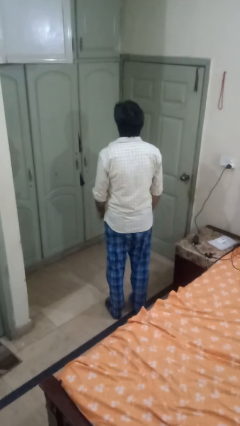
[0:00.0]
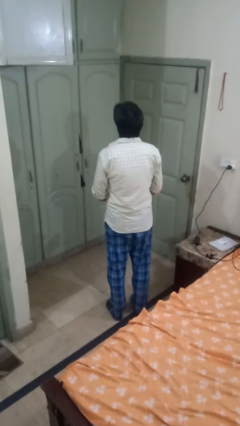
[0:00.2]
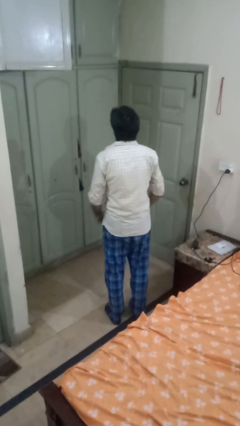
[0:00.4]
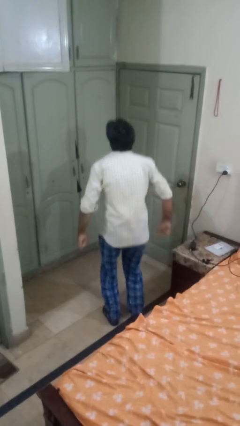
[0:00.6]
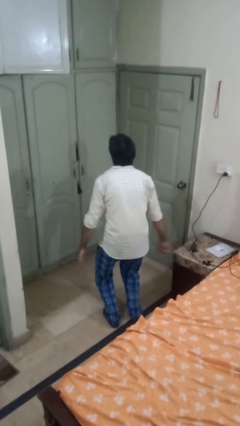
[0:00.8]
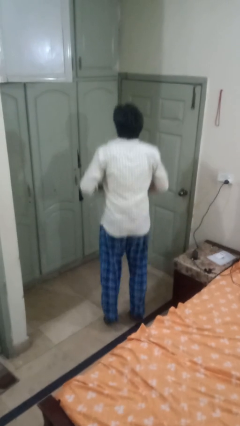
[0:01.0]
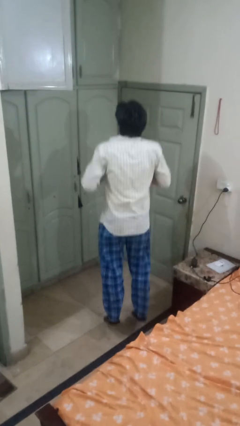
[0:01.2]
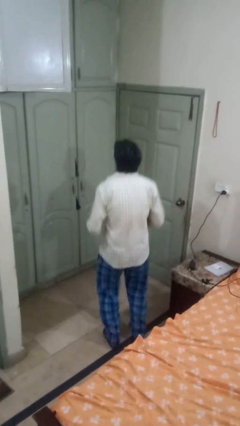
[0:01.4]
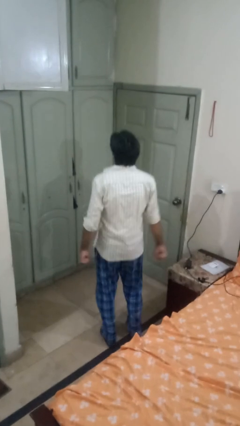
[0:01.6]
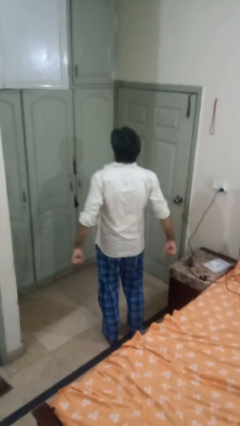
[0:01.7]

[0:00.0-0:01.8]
person jumps

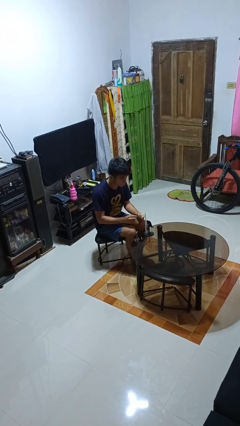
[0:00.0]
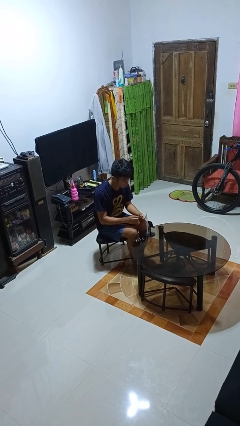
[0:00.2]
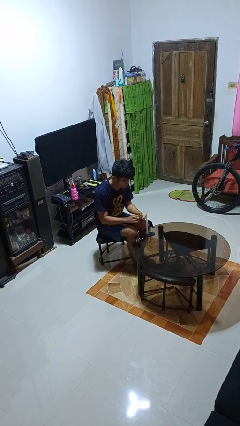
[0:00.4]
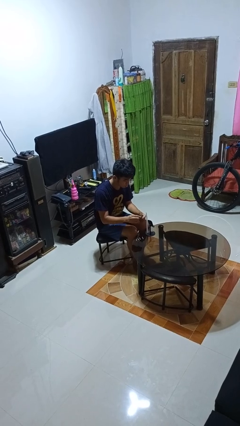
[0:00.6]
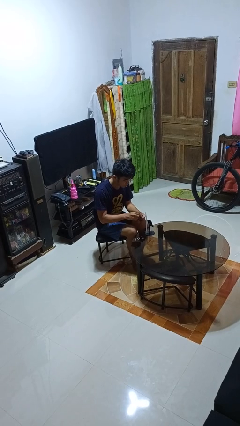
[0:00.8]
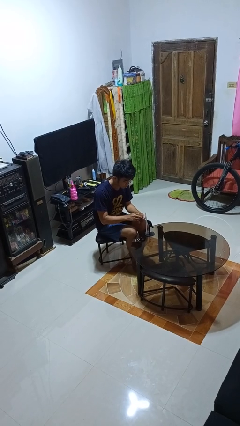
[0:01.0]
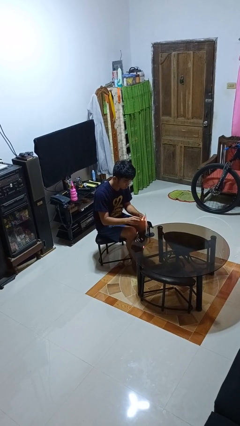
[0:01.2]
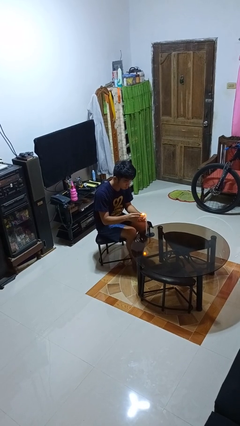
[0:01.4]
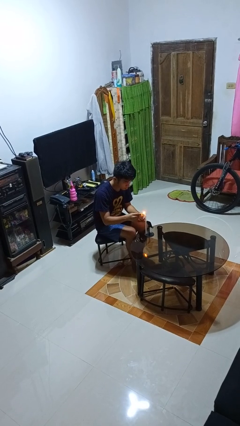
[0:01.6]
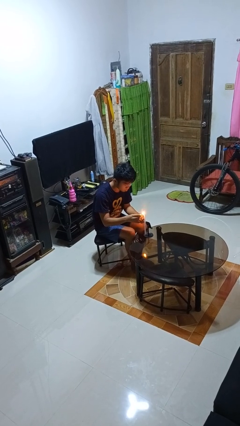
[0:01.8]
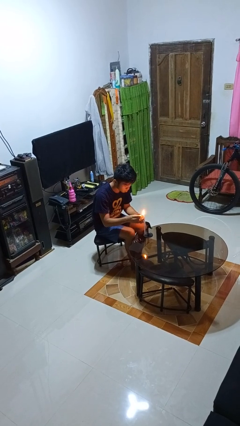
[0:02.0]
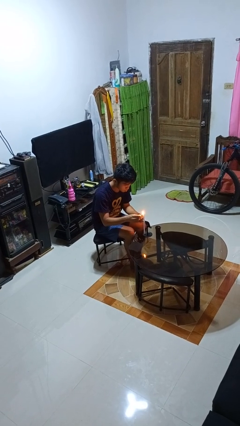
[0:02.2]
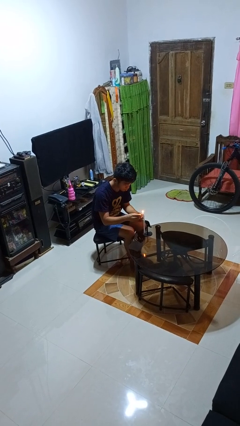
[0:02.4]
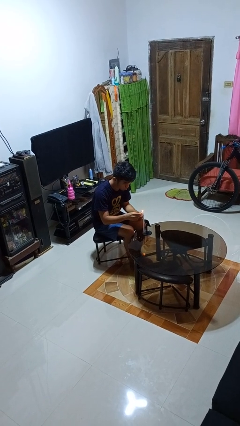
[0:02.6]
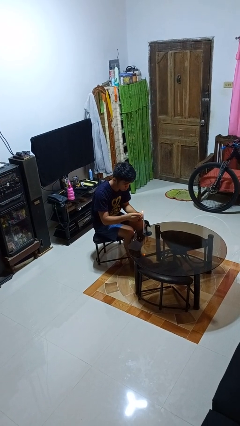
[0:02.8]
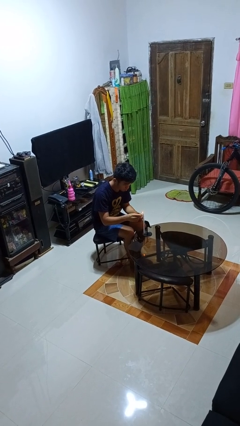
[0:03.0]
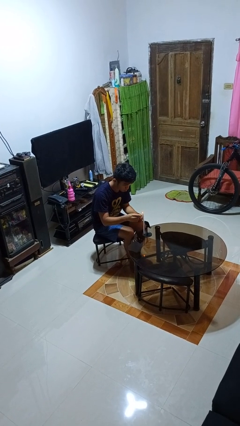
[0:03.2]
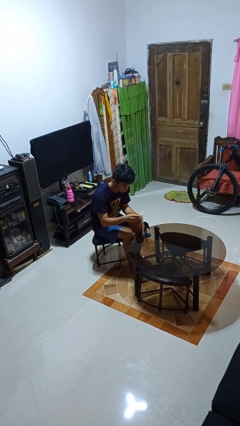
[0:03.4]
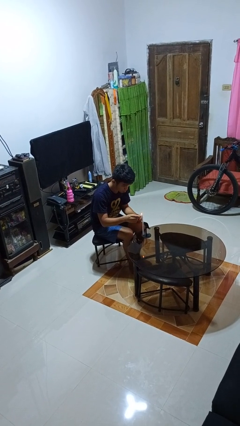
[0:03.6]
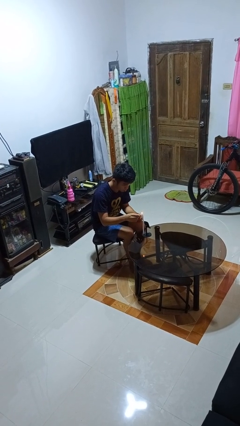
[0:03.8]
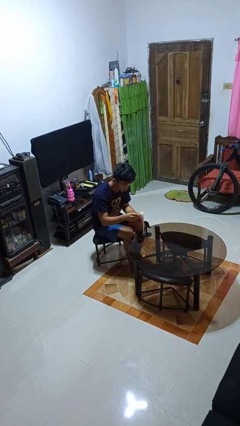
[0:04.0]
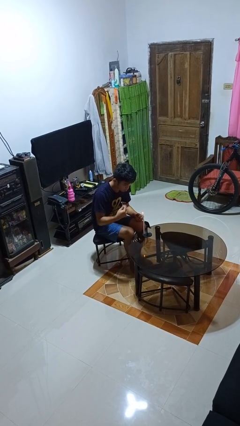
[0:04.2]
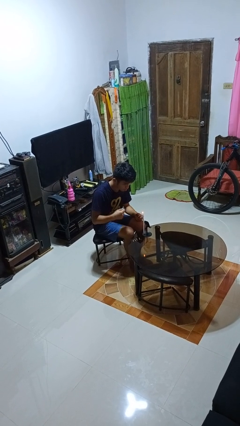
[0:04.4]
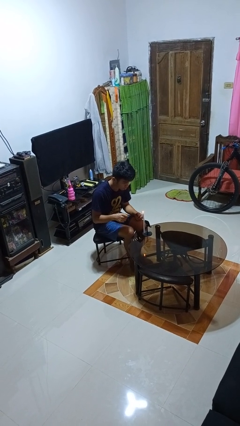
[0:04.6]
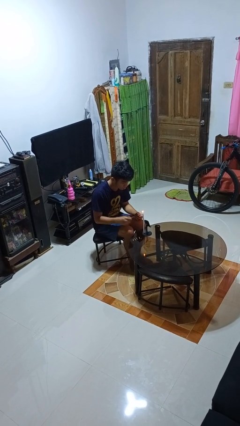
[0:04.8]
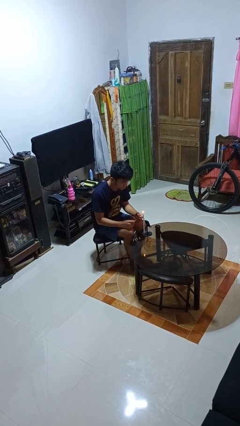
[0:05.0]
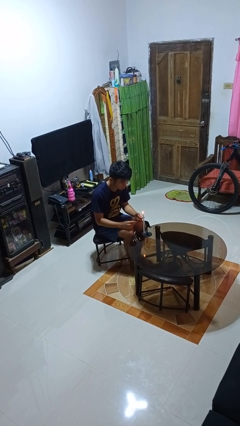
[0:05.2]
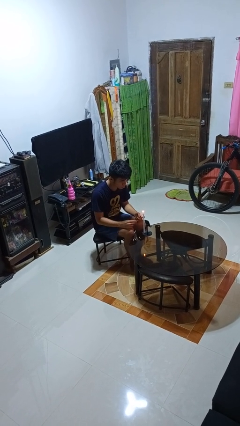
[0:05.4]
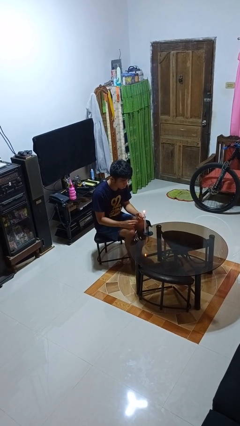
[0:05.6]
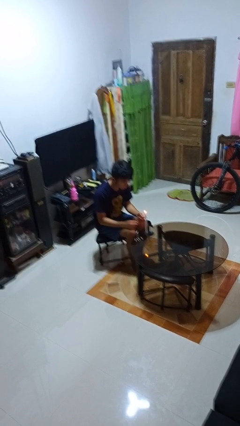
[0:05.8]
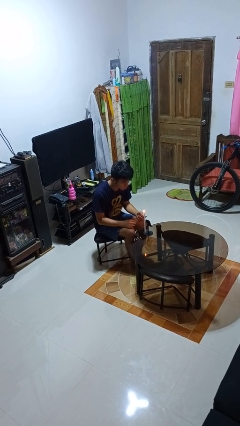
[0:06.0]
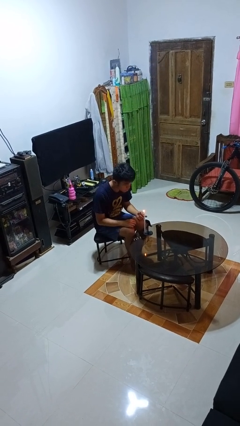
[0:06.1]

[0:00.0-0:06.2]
person lights candle

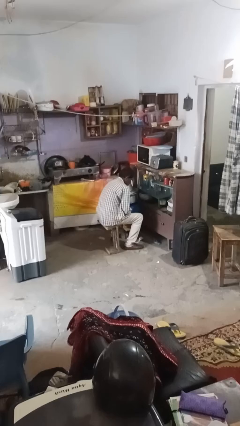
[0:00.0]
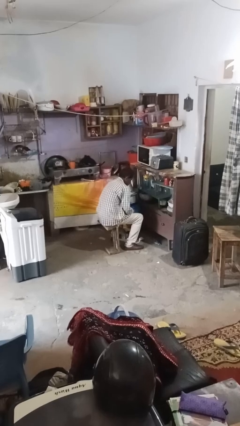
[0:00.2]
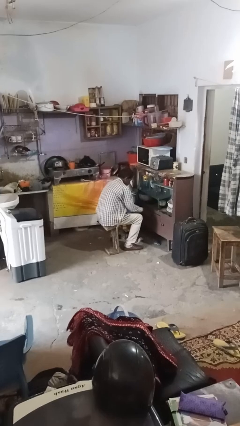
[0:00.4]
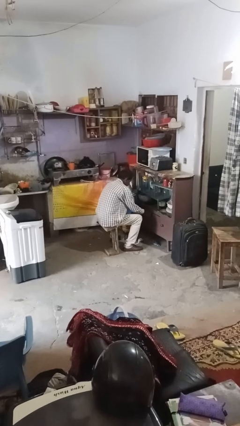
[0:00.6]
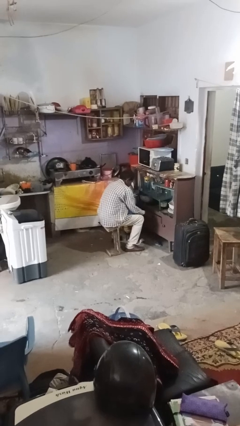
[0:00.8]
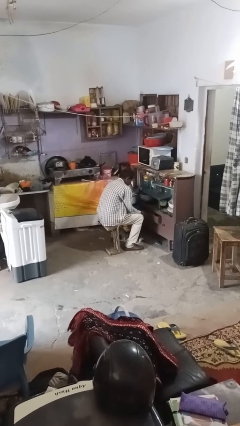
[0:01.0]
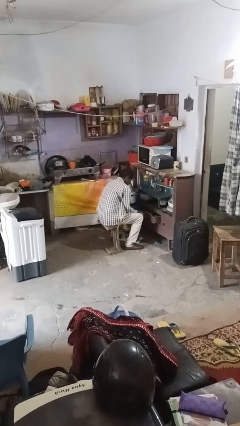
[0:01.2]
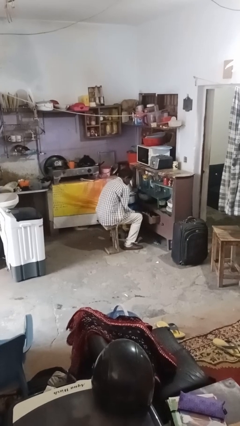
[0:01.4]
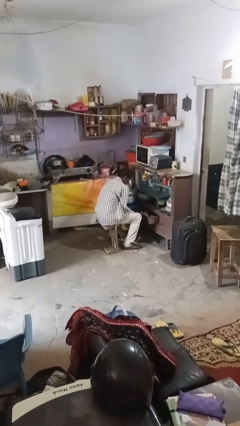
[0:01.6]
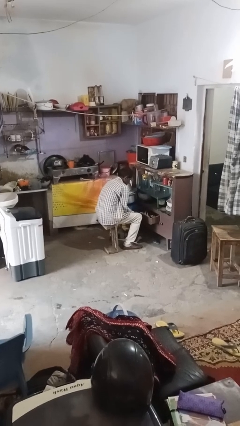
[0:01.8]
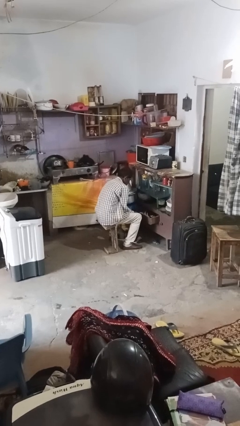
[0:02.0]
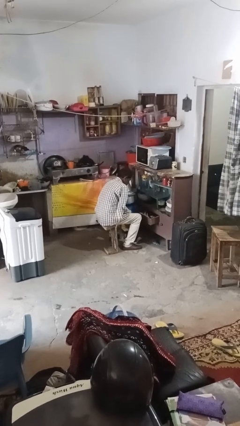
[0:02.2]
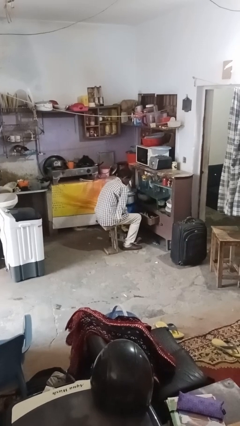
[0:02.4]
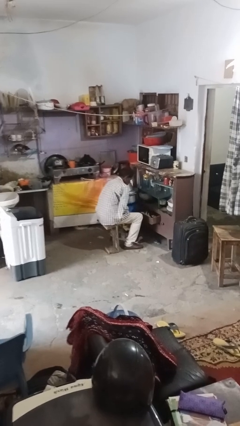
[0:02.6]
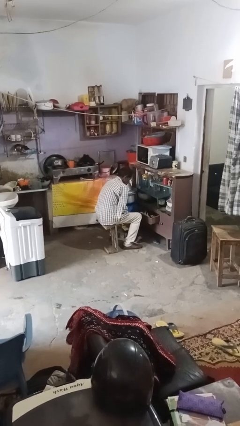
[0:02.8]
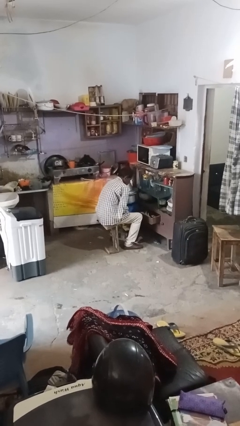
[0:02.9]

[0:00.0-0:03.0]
person opens kitchen drawer

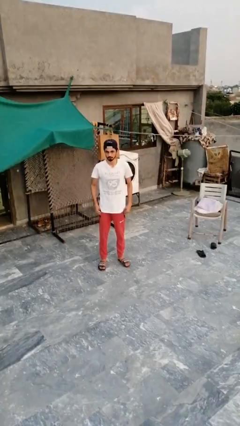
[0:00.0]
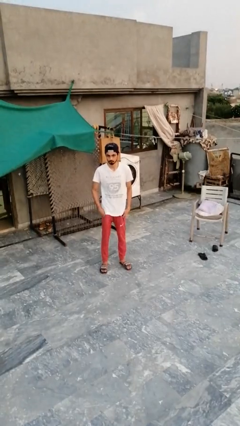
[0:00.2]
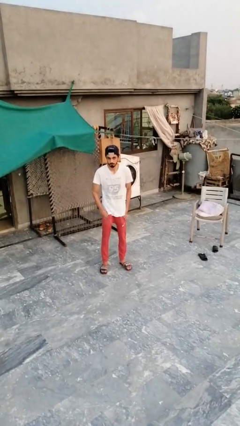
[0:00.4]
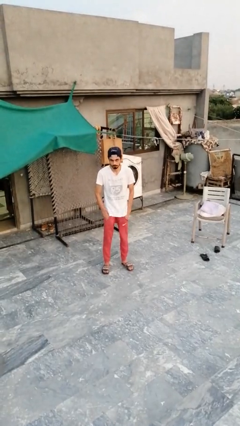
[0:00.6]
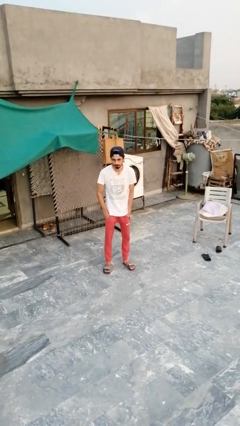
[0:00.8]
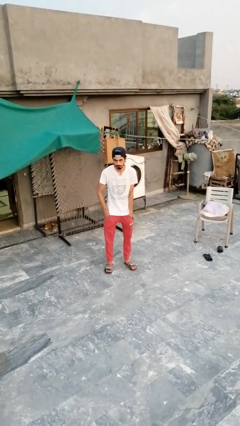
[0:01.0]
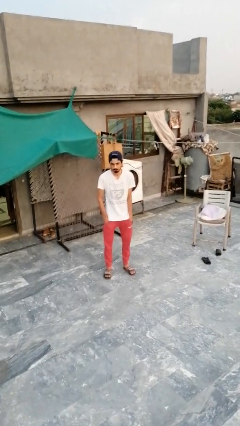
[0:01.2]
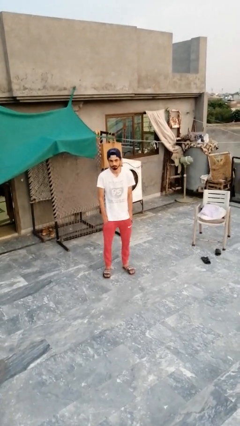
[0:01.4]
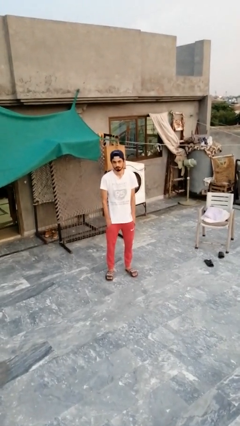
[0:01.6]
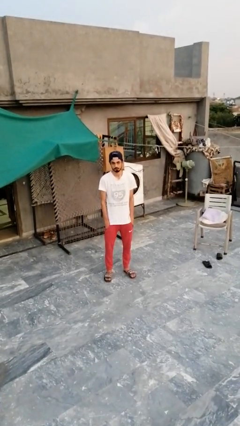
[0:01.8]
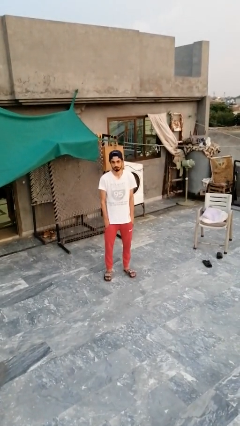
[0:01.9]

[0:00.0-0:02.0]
person puts hands in back pockets

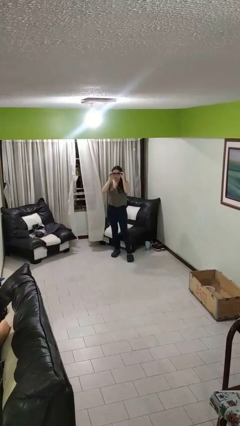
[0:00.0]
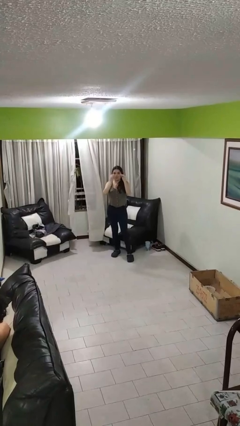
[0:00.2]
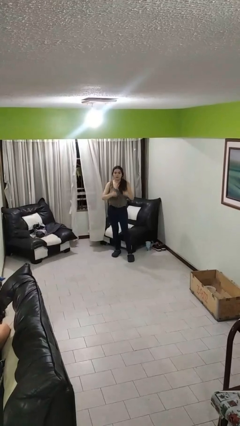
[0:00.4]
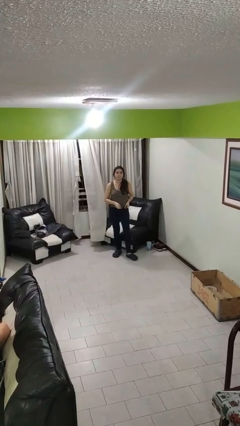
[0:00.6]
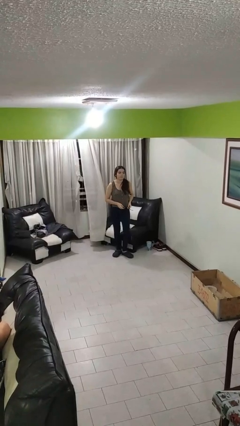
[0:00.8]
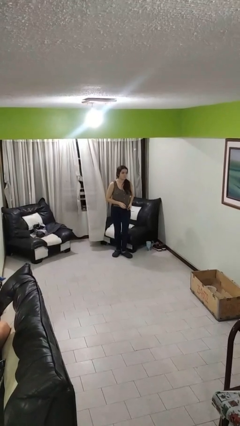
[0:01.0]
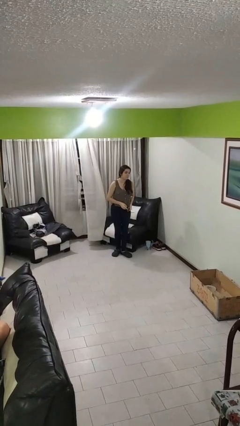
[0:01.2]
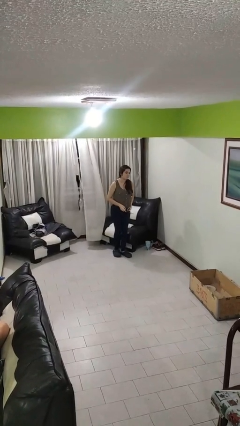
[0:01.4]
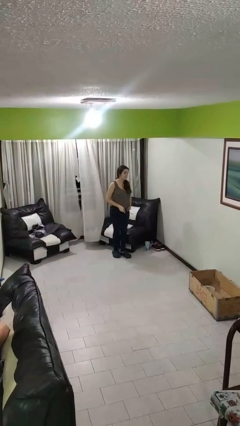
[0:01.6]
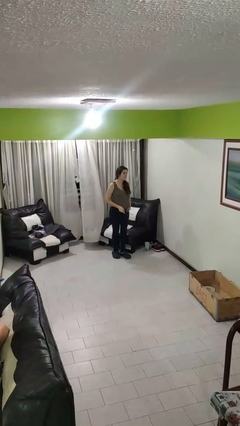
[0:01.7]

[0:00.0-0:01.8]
person takes off glasses

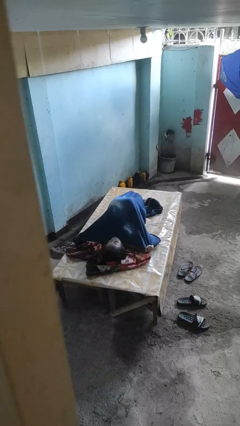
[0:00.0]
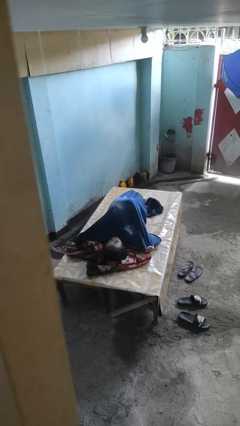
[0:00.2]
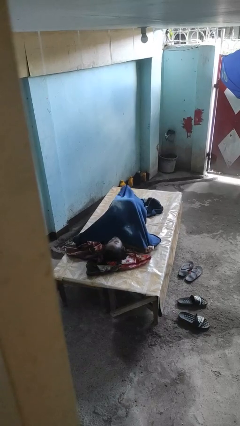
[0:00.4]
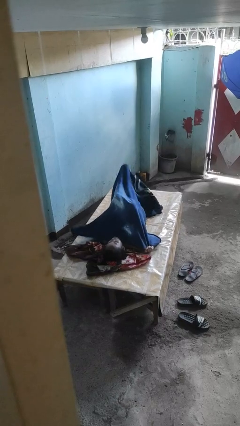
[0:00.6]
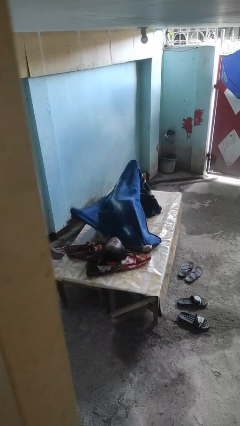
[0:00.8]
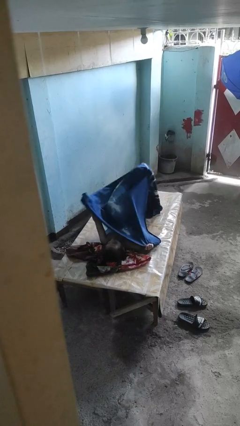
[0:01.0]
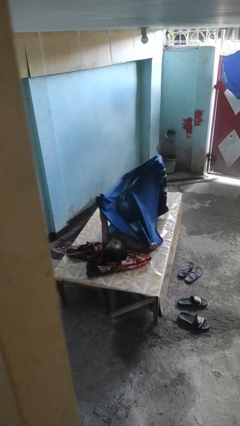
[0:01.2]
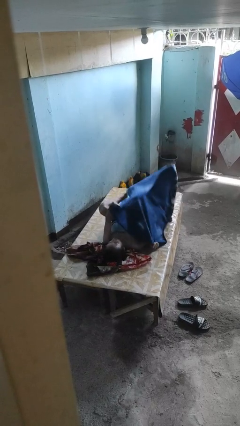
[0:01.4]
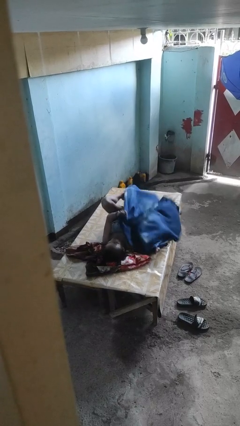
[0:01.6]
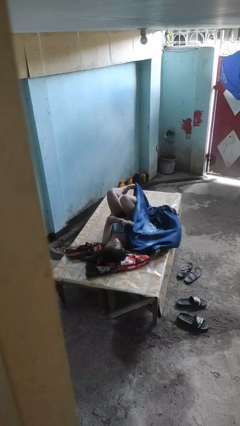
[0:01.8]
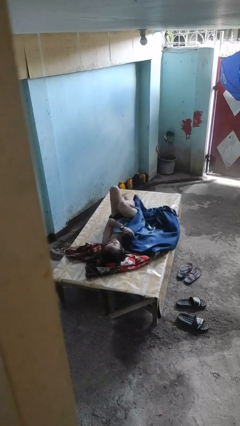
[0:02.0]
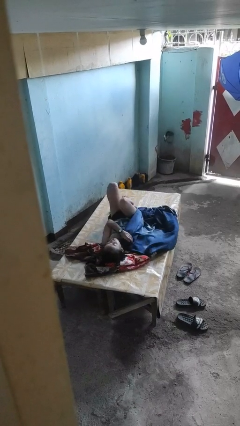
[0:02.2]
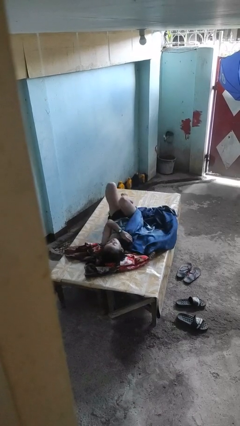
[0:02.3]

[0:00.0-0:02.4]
person uncovers with bedsheets

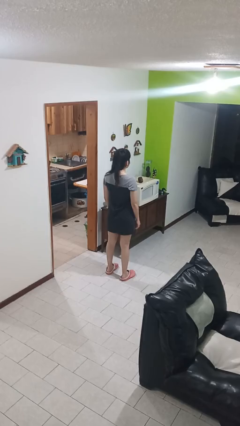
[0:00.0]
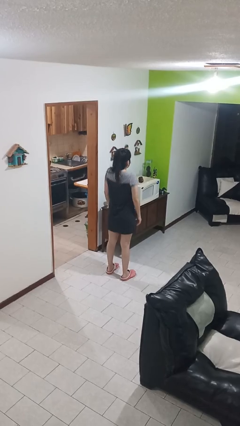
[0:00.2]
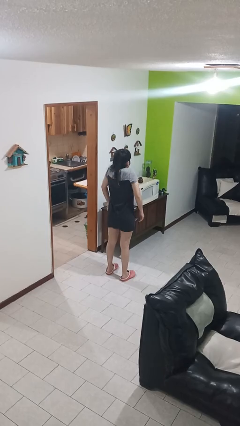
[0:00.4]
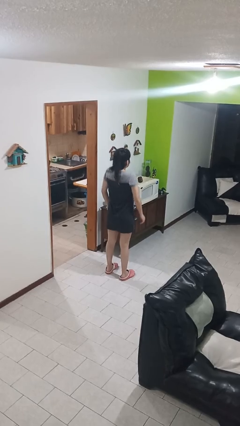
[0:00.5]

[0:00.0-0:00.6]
person shrugs
